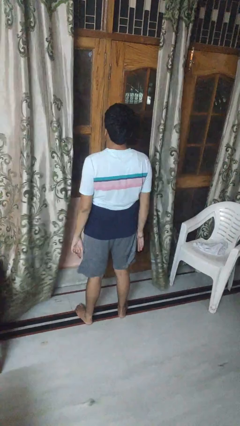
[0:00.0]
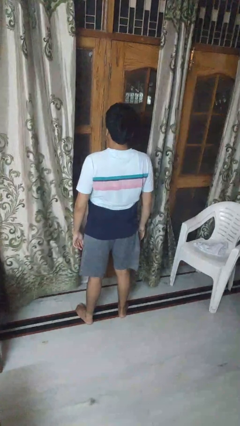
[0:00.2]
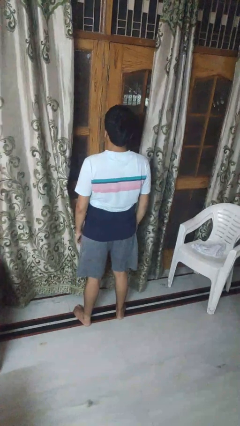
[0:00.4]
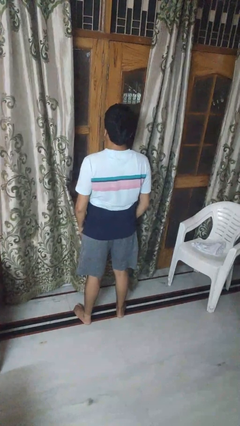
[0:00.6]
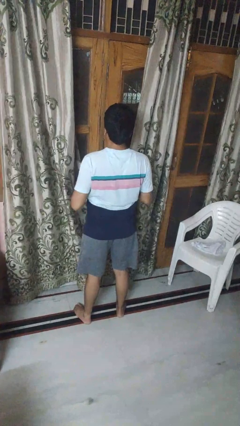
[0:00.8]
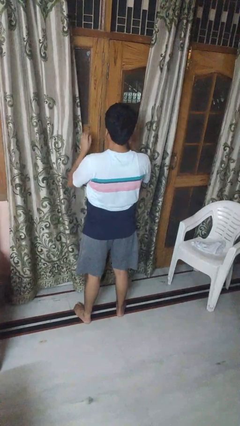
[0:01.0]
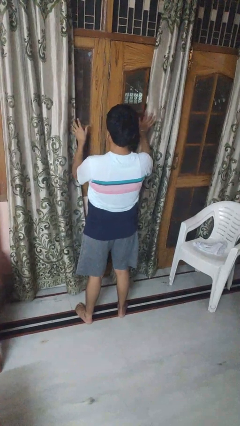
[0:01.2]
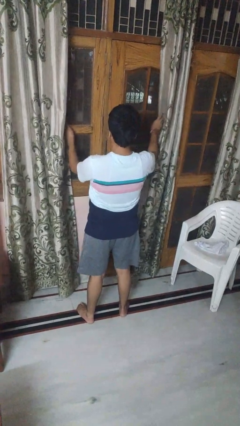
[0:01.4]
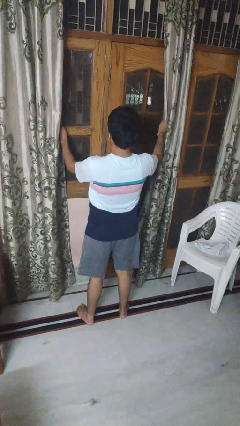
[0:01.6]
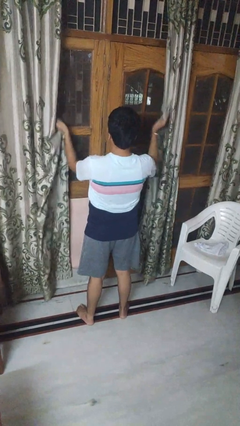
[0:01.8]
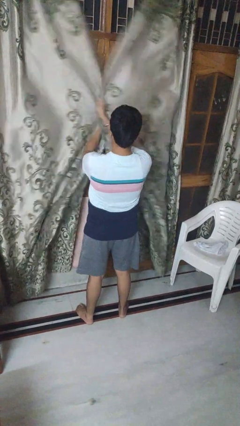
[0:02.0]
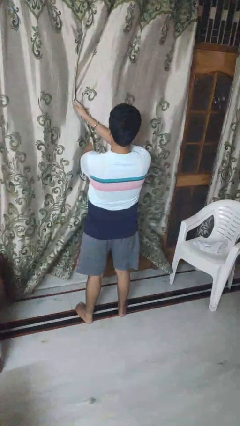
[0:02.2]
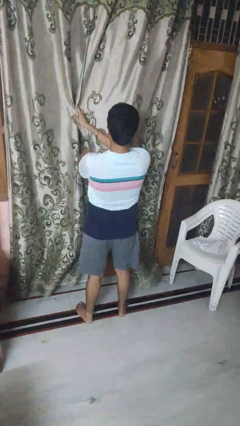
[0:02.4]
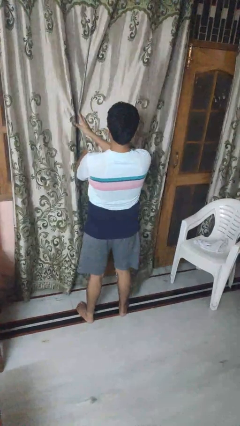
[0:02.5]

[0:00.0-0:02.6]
person closes curtains

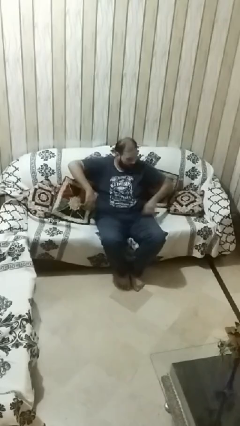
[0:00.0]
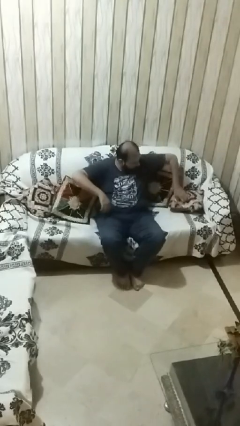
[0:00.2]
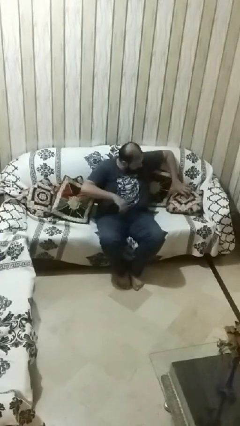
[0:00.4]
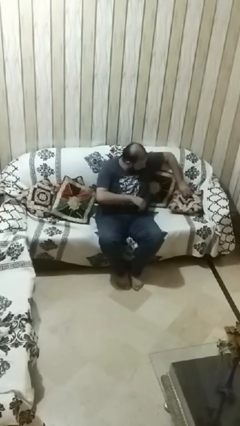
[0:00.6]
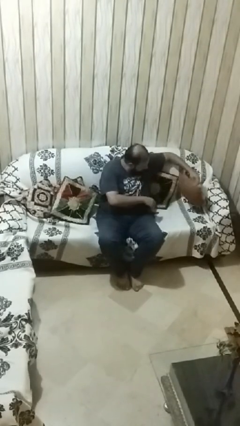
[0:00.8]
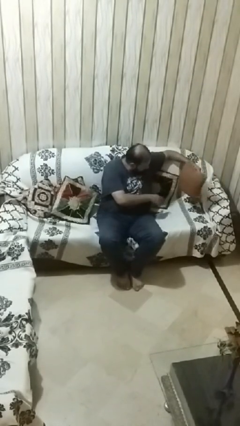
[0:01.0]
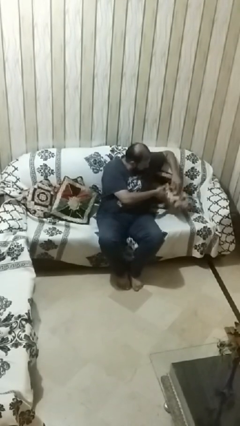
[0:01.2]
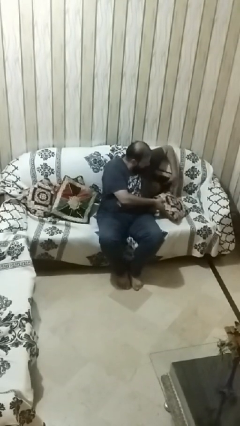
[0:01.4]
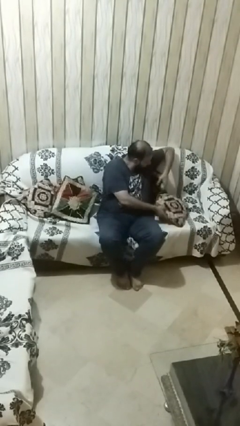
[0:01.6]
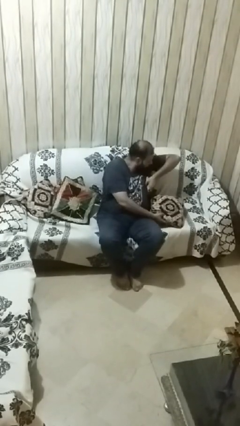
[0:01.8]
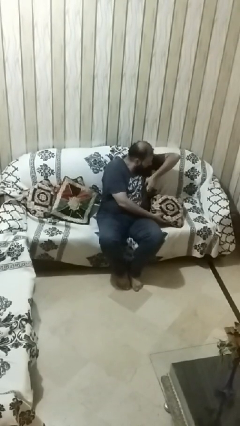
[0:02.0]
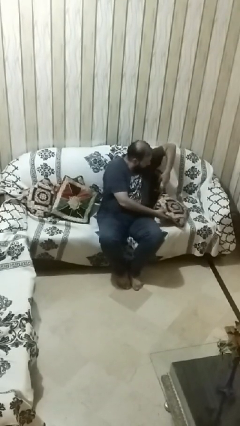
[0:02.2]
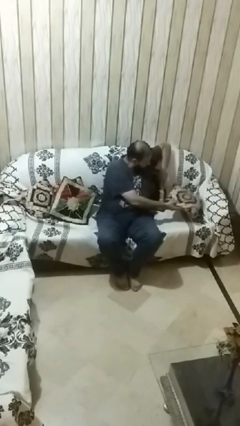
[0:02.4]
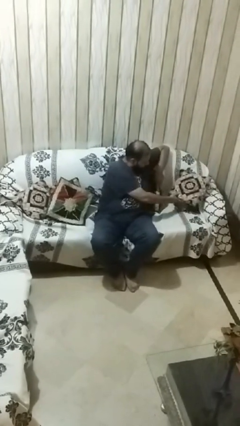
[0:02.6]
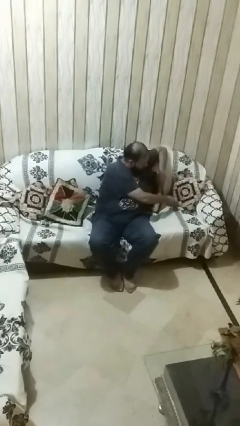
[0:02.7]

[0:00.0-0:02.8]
person searches in couch

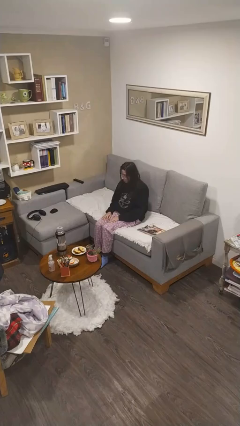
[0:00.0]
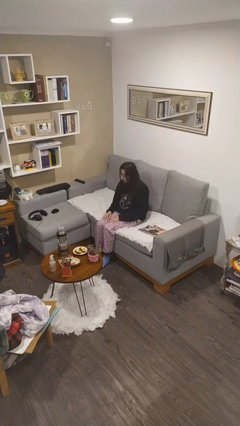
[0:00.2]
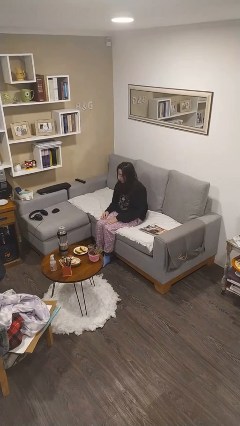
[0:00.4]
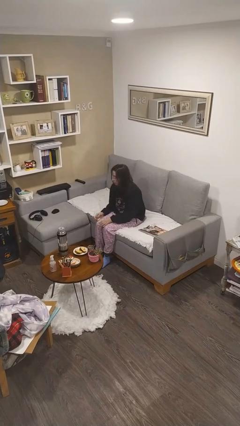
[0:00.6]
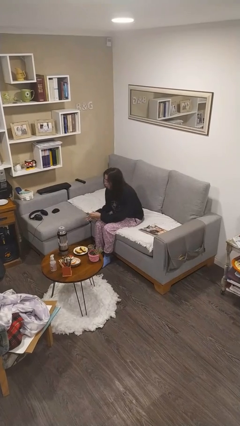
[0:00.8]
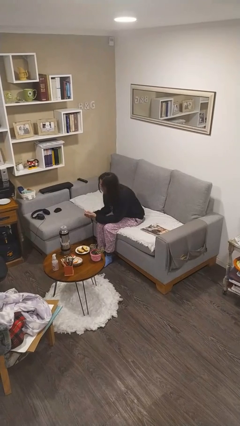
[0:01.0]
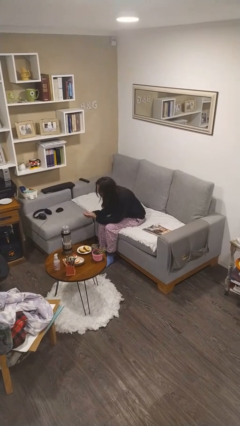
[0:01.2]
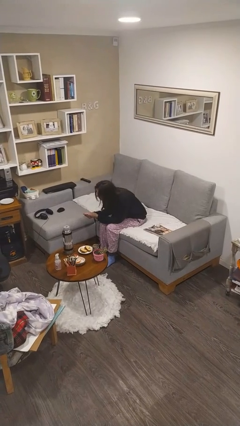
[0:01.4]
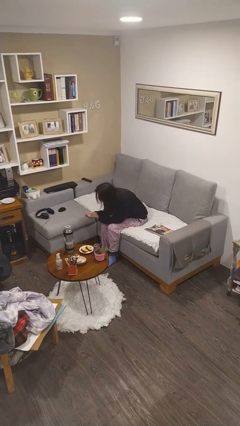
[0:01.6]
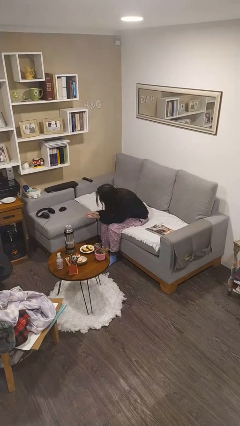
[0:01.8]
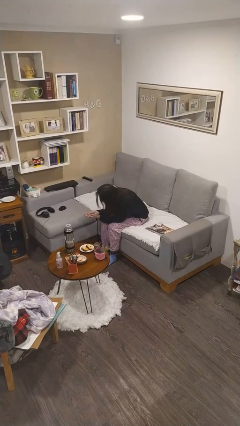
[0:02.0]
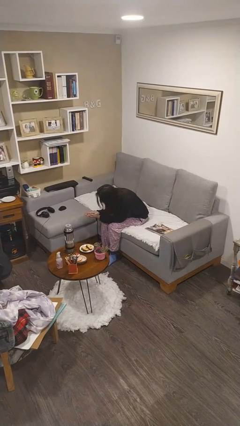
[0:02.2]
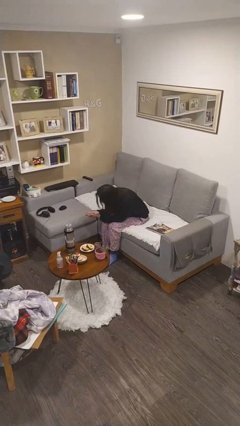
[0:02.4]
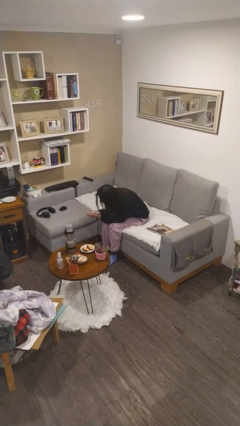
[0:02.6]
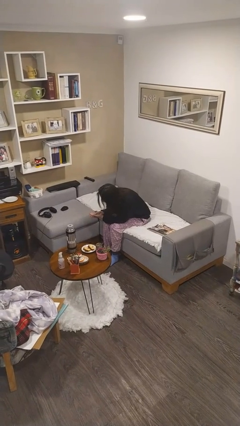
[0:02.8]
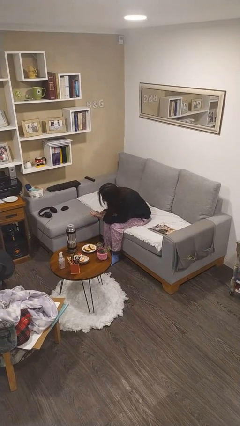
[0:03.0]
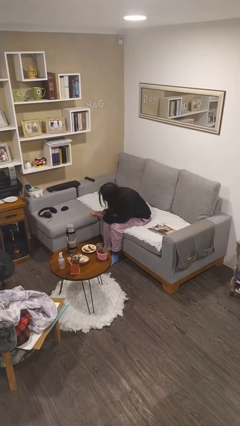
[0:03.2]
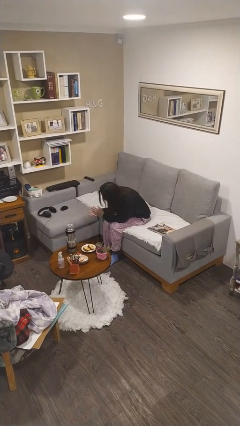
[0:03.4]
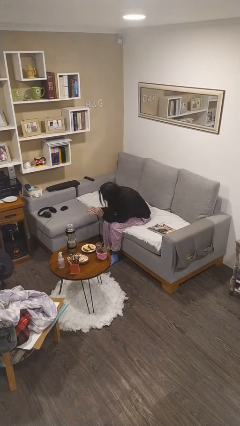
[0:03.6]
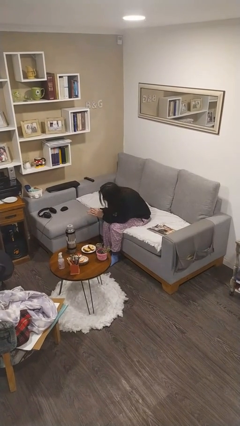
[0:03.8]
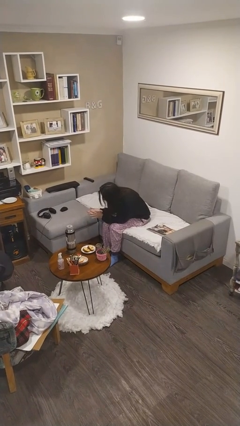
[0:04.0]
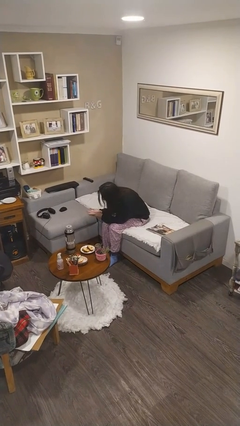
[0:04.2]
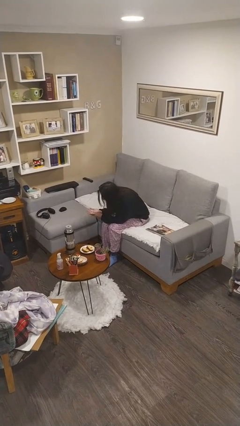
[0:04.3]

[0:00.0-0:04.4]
person looks at hands in lap

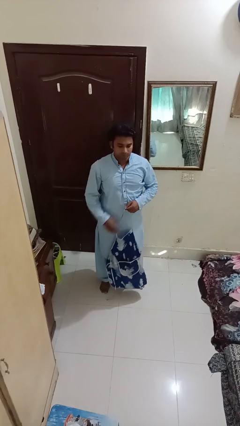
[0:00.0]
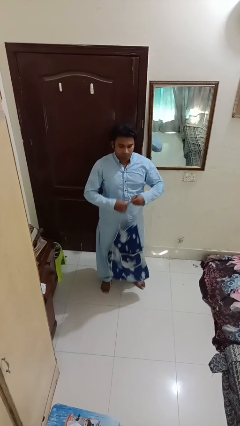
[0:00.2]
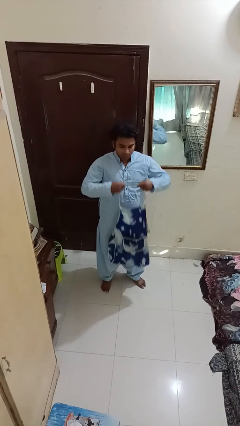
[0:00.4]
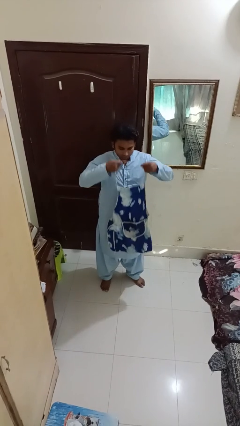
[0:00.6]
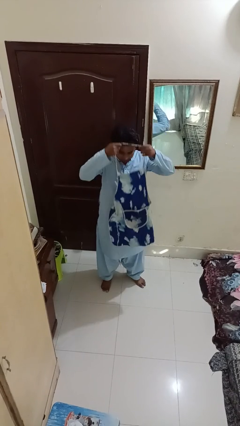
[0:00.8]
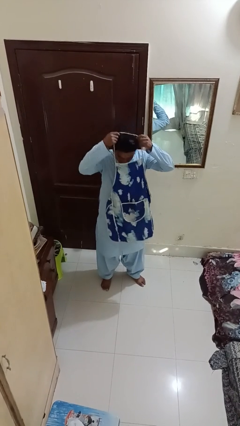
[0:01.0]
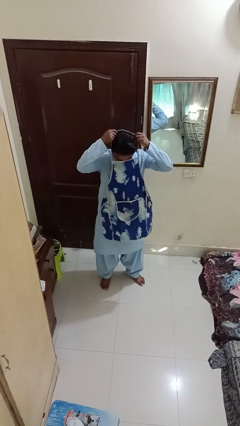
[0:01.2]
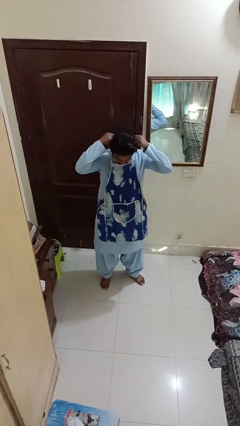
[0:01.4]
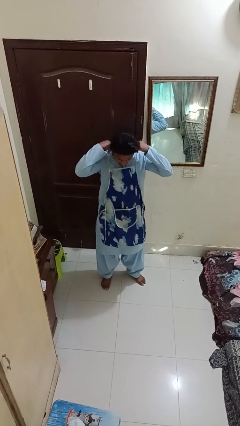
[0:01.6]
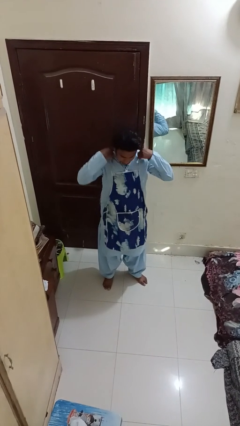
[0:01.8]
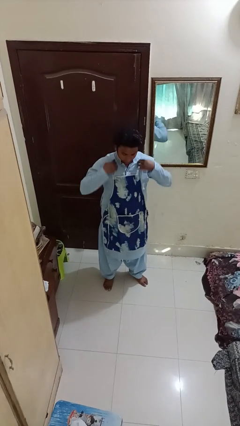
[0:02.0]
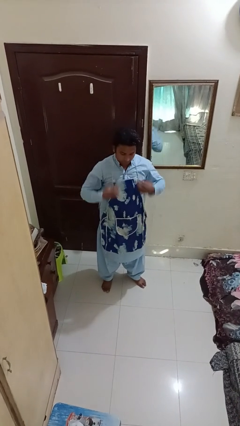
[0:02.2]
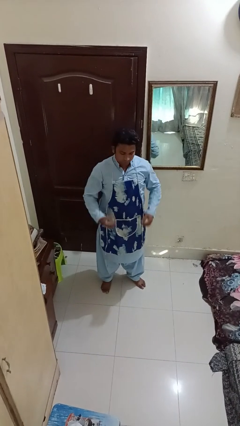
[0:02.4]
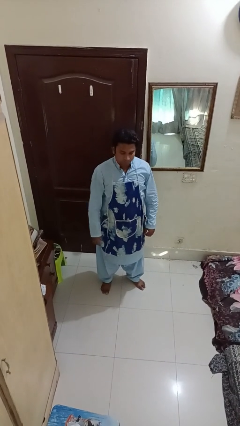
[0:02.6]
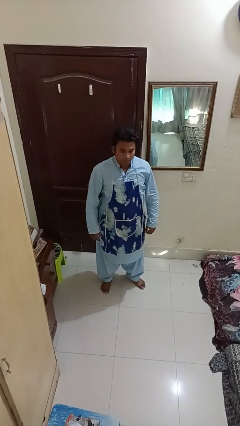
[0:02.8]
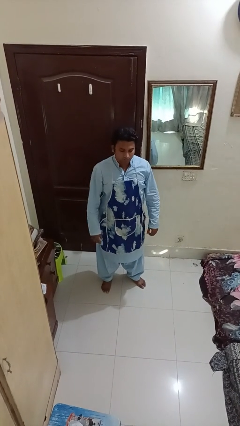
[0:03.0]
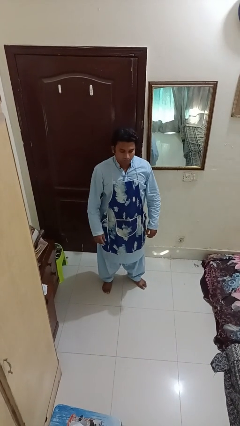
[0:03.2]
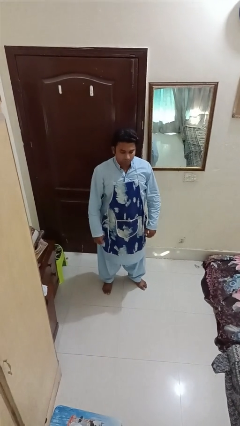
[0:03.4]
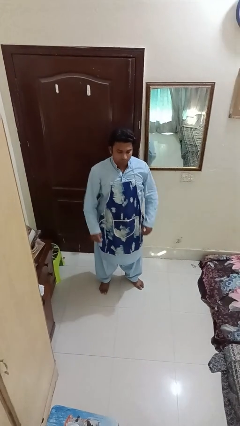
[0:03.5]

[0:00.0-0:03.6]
person puts on apron

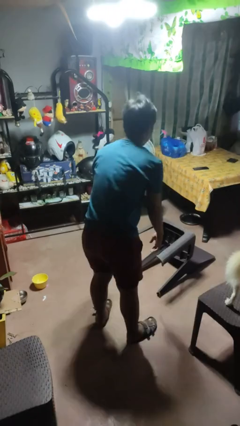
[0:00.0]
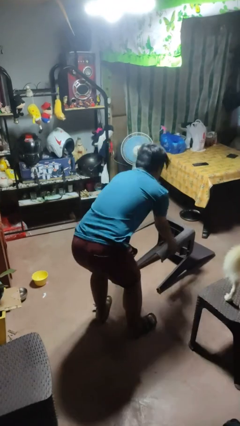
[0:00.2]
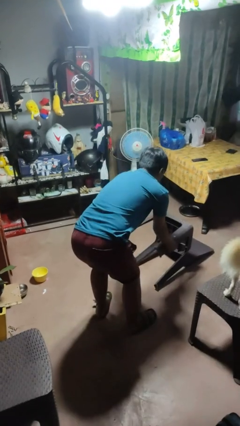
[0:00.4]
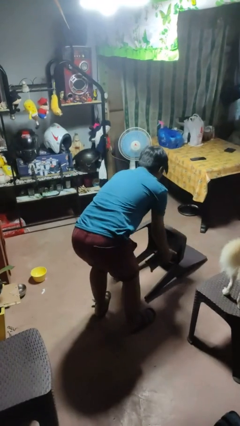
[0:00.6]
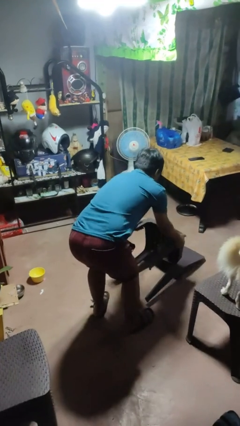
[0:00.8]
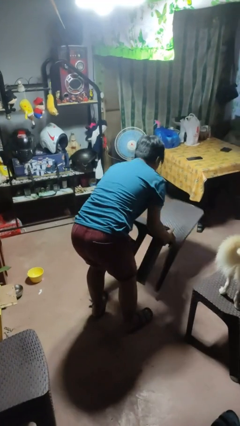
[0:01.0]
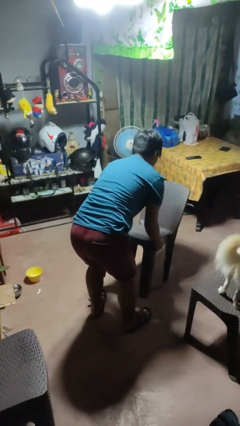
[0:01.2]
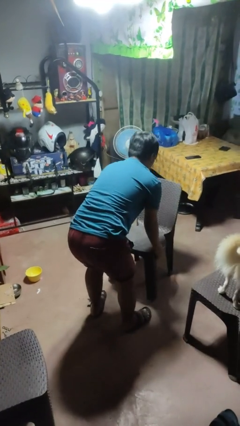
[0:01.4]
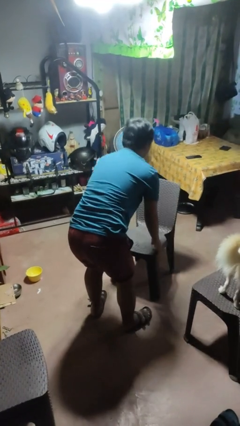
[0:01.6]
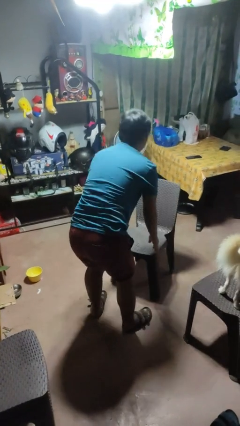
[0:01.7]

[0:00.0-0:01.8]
person sets upright furniture

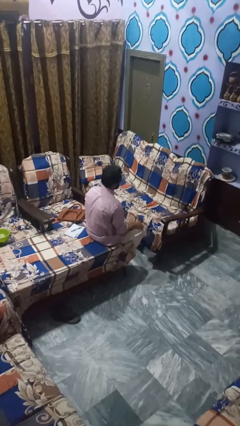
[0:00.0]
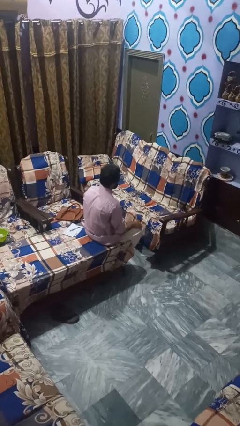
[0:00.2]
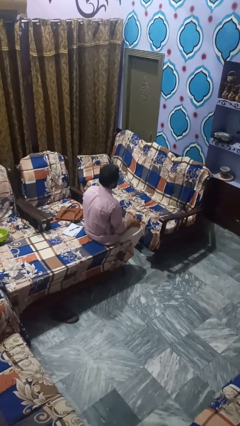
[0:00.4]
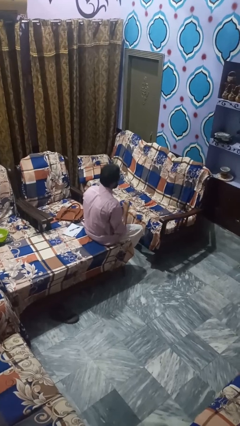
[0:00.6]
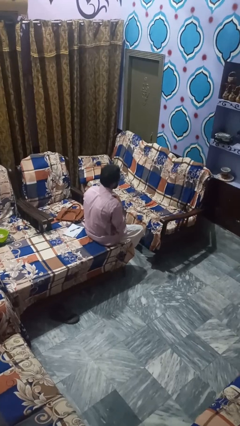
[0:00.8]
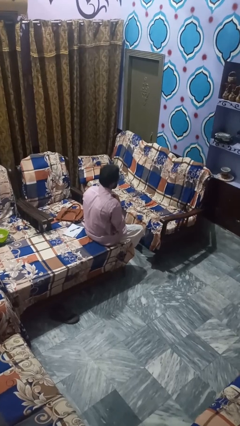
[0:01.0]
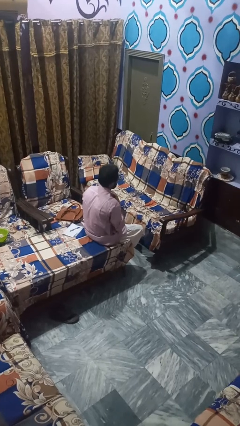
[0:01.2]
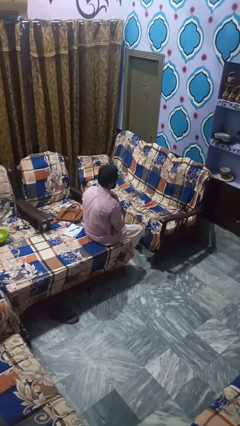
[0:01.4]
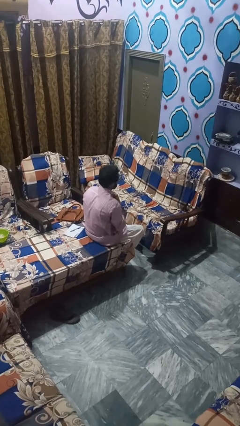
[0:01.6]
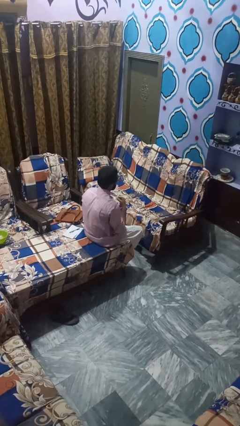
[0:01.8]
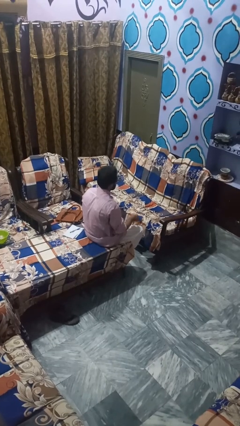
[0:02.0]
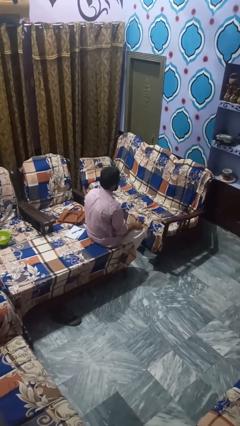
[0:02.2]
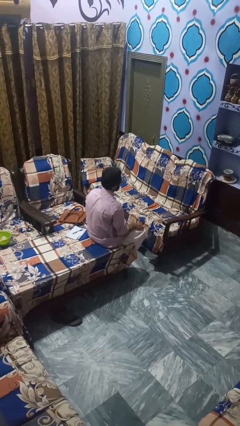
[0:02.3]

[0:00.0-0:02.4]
person buttons shirt
